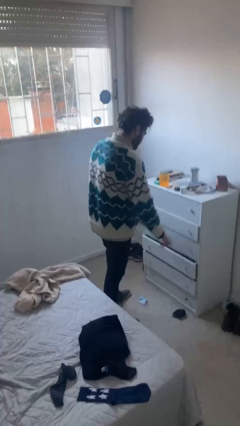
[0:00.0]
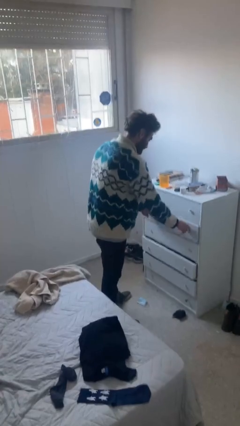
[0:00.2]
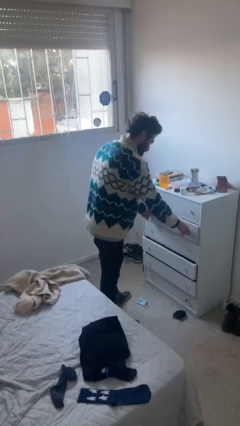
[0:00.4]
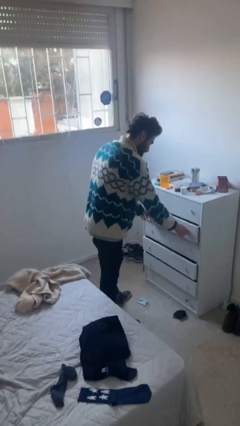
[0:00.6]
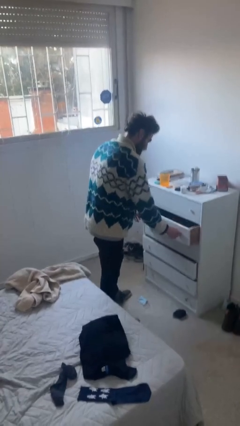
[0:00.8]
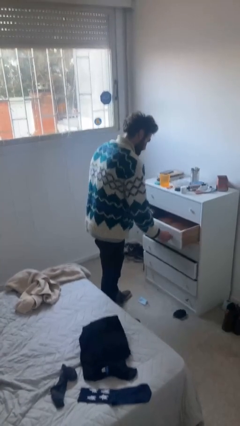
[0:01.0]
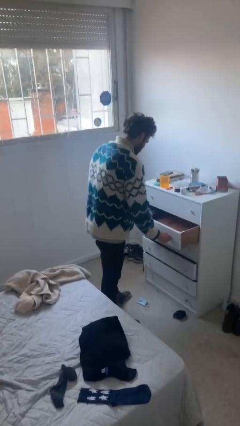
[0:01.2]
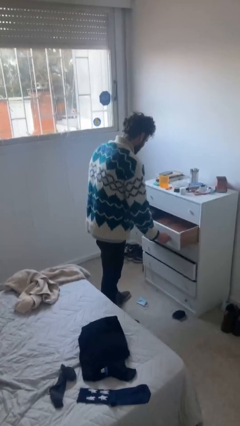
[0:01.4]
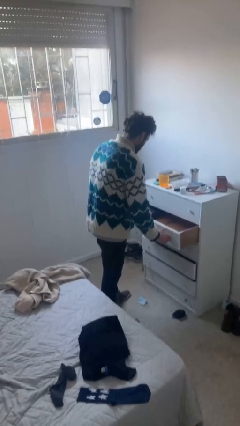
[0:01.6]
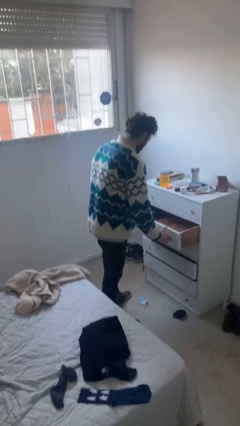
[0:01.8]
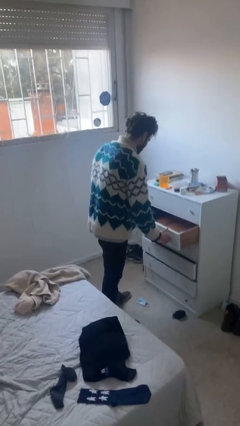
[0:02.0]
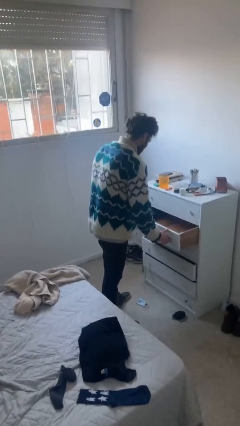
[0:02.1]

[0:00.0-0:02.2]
person opens dresser drawer

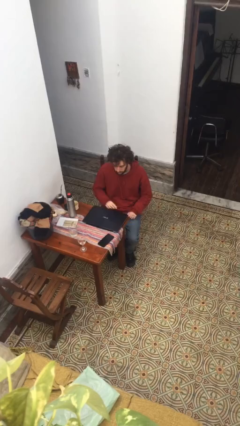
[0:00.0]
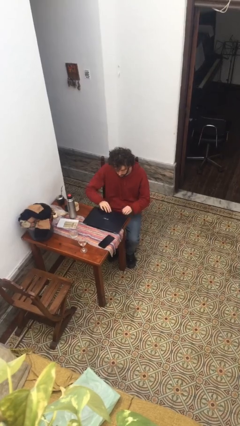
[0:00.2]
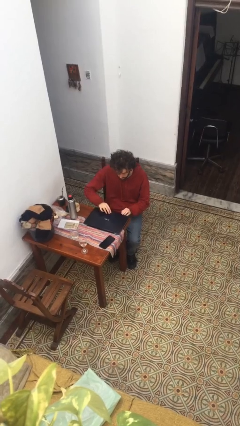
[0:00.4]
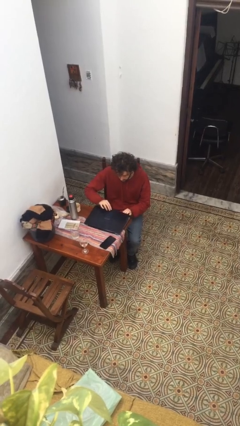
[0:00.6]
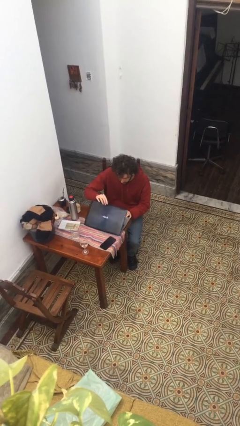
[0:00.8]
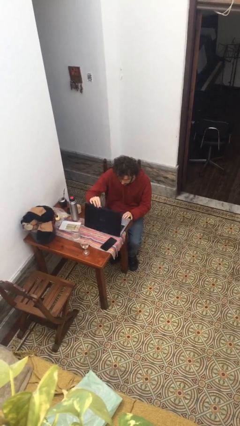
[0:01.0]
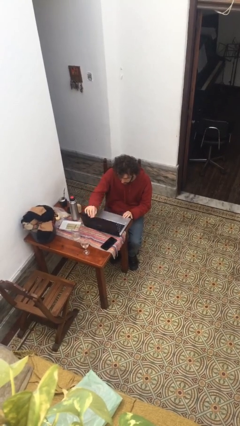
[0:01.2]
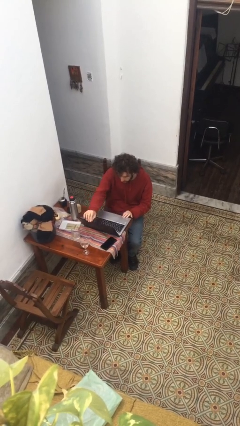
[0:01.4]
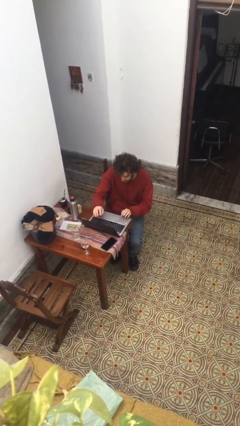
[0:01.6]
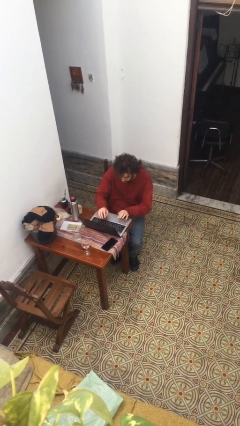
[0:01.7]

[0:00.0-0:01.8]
person opens laptop

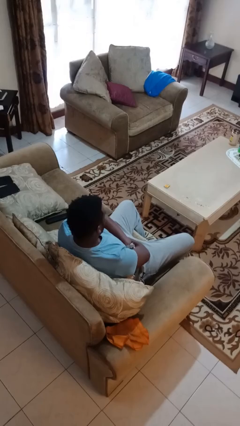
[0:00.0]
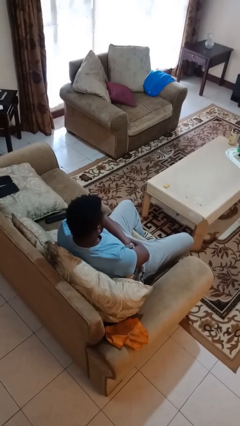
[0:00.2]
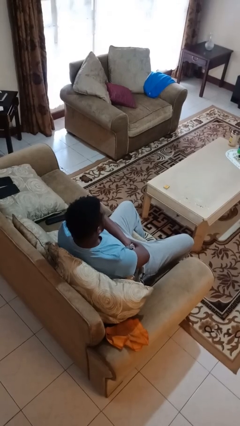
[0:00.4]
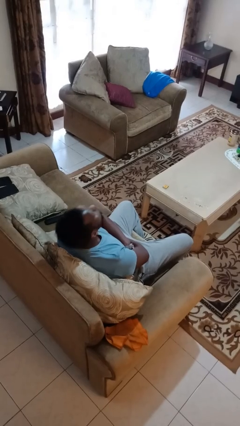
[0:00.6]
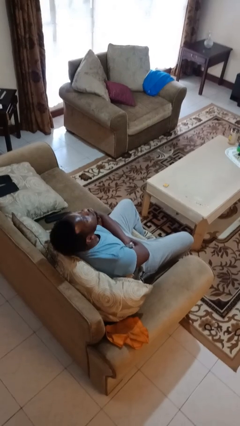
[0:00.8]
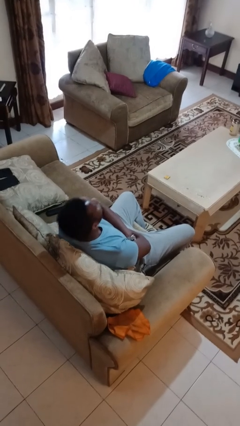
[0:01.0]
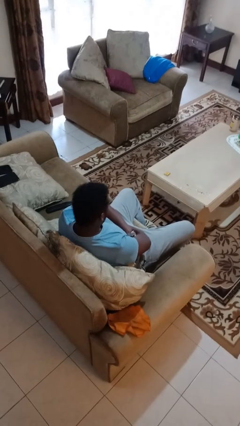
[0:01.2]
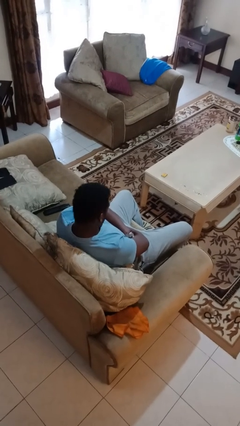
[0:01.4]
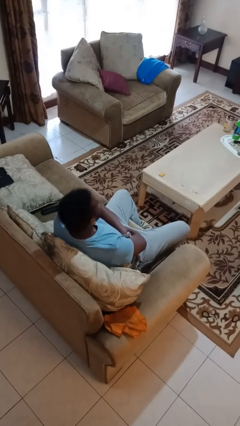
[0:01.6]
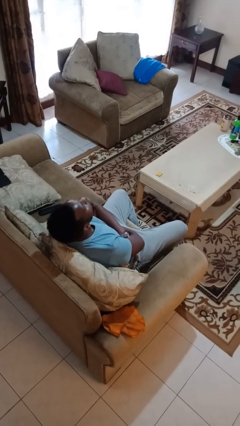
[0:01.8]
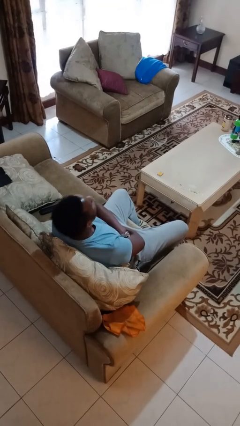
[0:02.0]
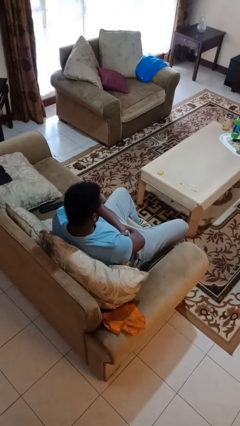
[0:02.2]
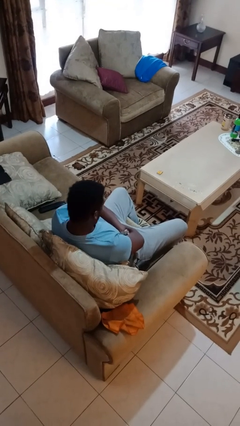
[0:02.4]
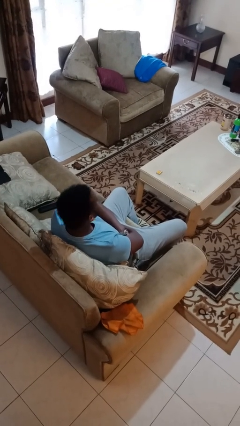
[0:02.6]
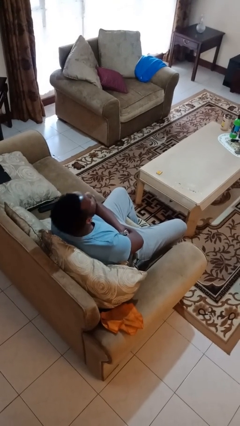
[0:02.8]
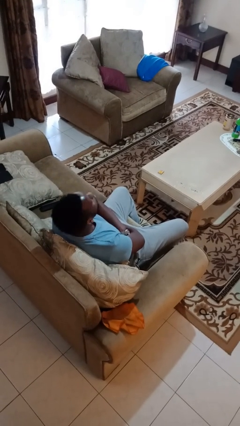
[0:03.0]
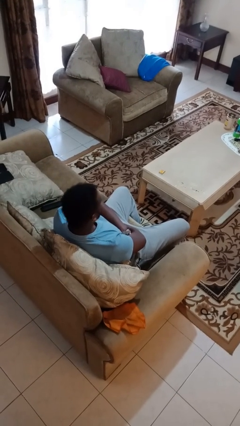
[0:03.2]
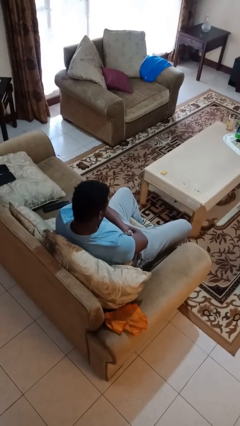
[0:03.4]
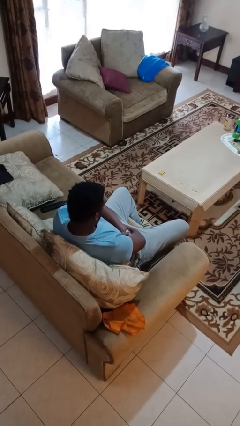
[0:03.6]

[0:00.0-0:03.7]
person nods head

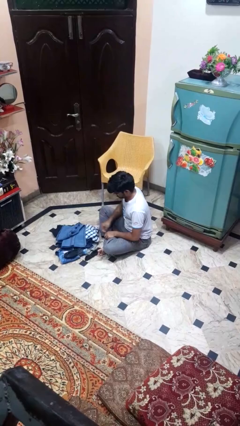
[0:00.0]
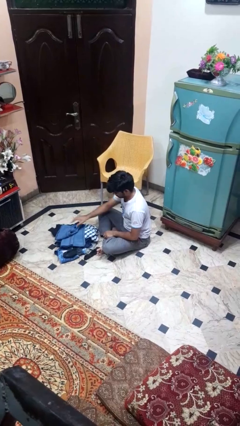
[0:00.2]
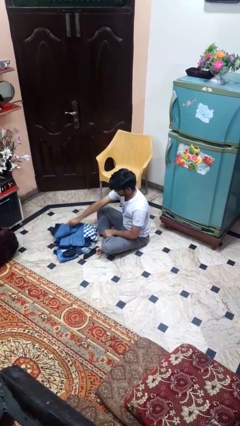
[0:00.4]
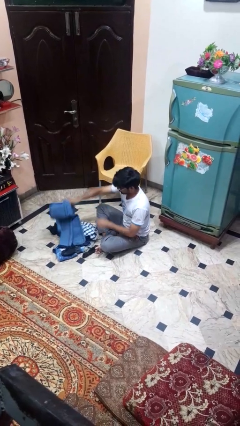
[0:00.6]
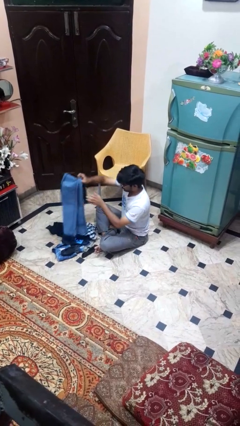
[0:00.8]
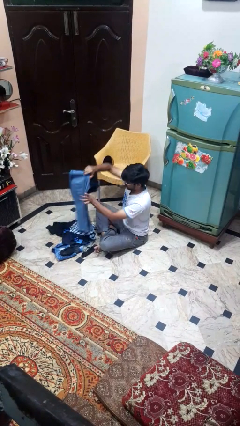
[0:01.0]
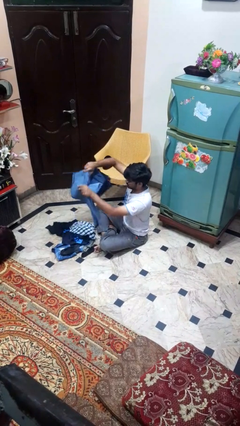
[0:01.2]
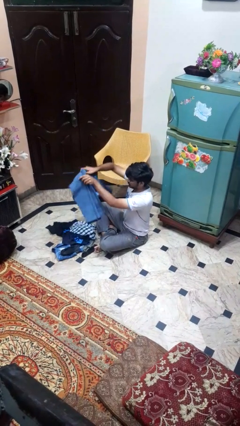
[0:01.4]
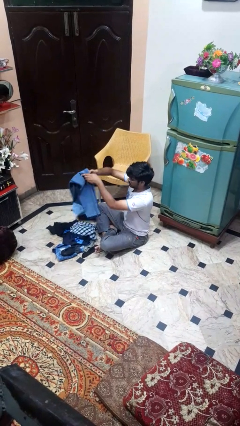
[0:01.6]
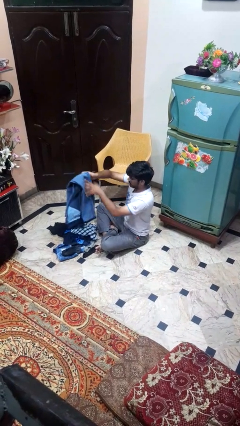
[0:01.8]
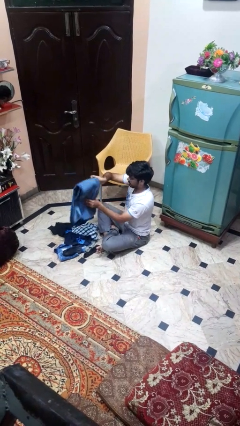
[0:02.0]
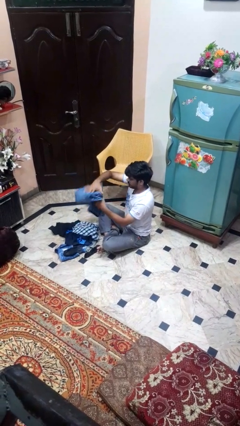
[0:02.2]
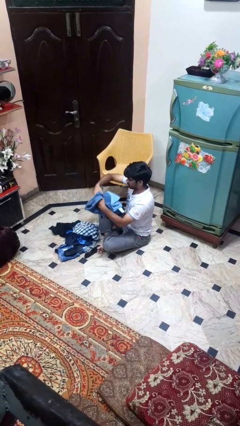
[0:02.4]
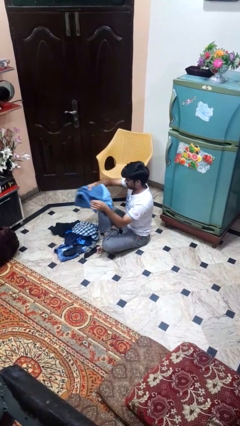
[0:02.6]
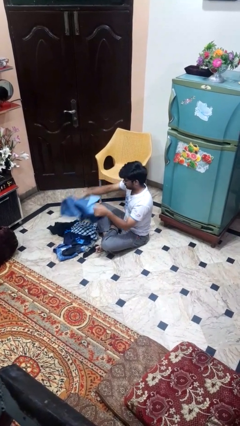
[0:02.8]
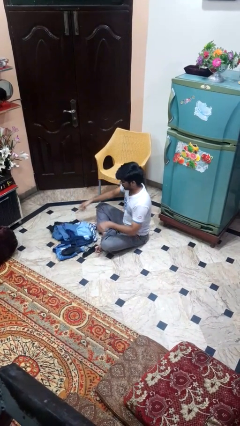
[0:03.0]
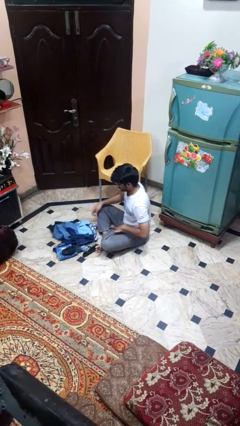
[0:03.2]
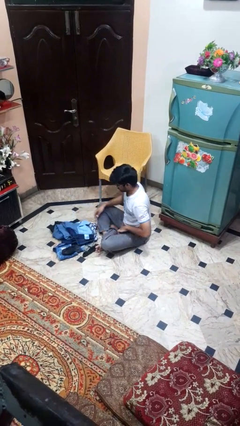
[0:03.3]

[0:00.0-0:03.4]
person folds pants

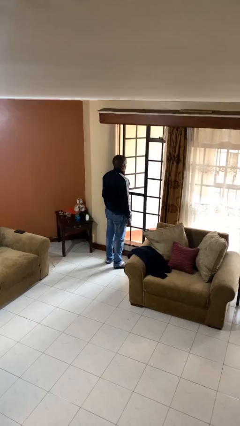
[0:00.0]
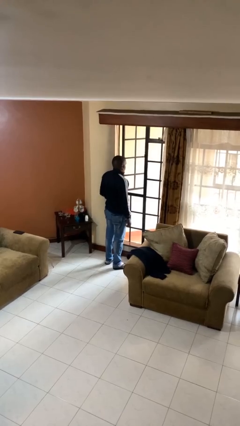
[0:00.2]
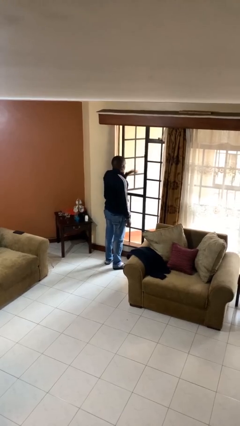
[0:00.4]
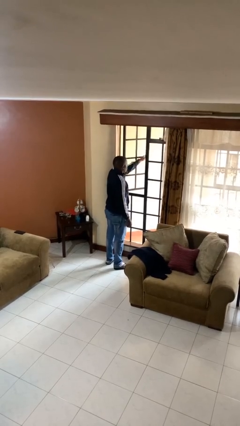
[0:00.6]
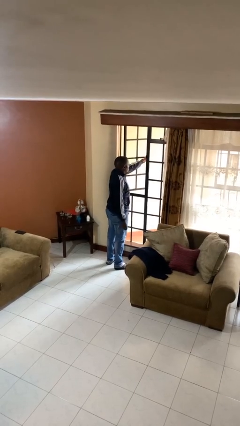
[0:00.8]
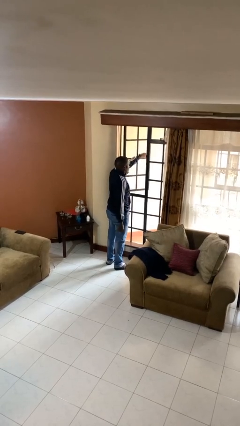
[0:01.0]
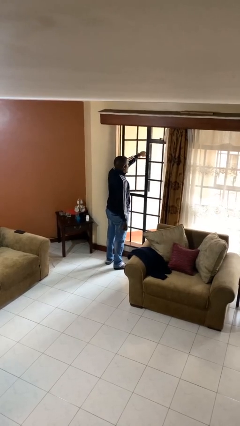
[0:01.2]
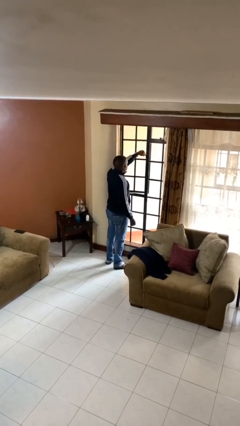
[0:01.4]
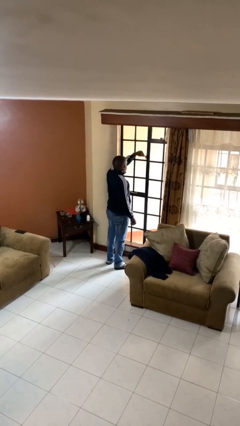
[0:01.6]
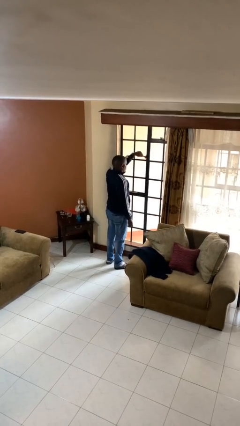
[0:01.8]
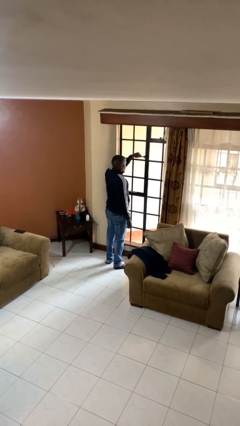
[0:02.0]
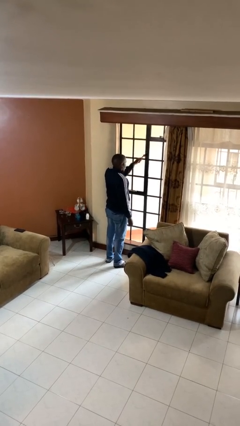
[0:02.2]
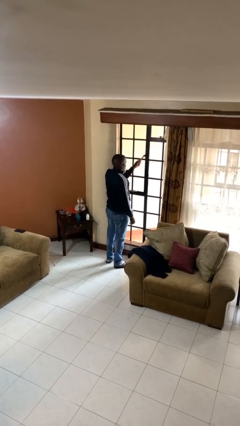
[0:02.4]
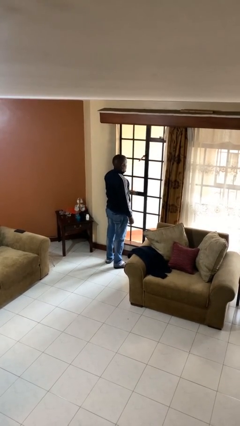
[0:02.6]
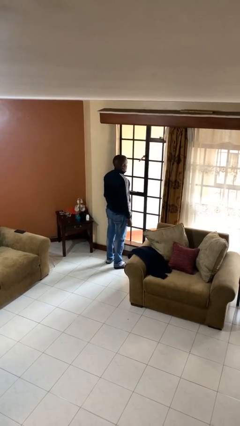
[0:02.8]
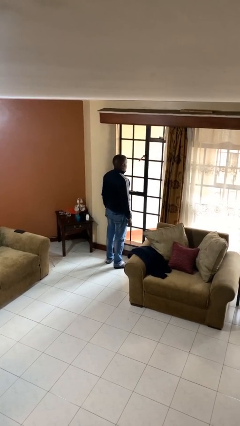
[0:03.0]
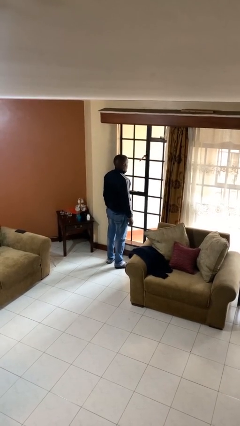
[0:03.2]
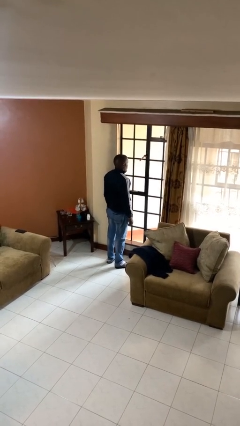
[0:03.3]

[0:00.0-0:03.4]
person closes home window

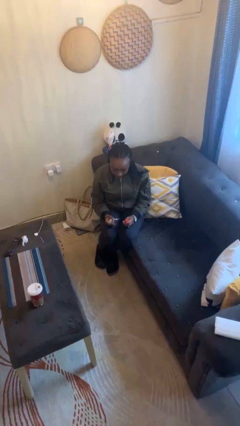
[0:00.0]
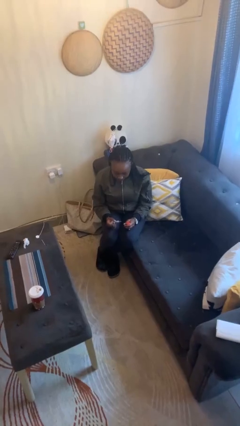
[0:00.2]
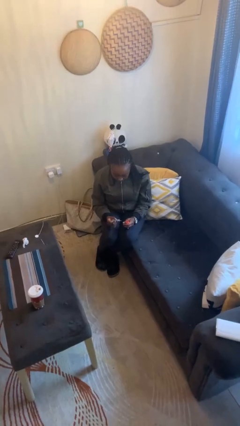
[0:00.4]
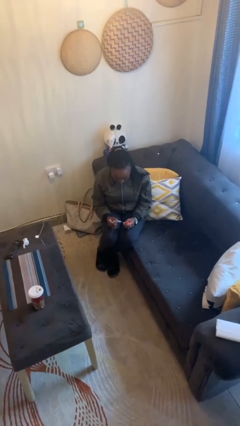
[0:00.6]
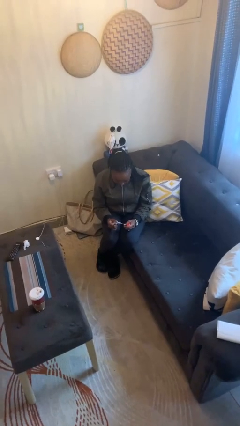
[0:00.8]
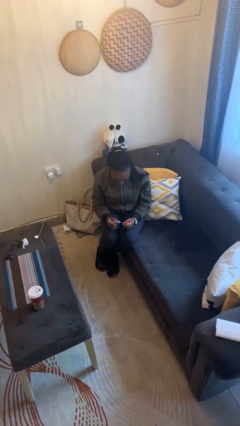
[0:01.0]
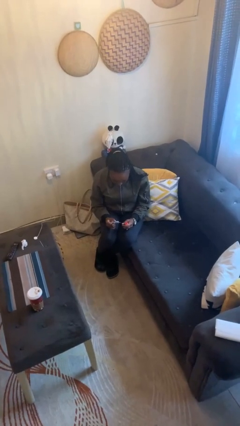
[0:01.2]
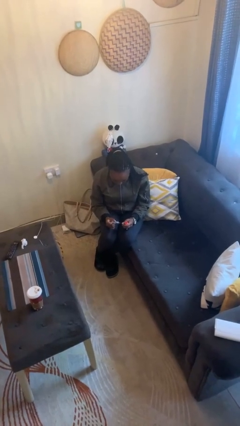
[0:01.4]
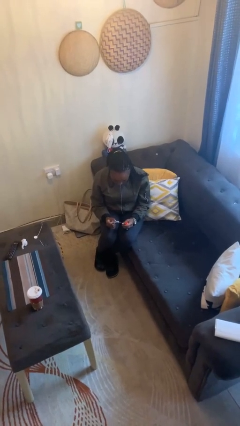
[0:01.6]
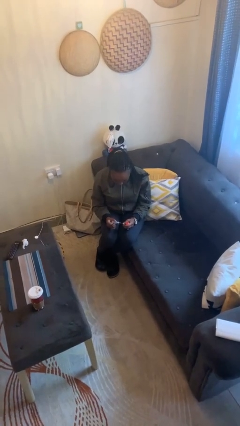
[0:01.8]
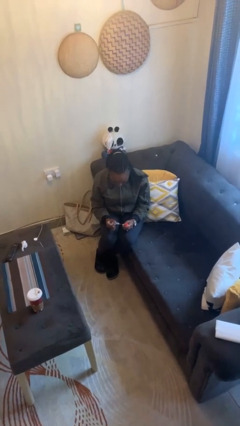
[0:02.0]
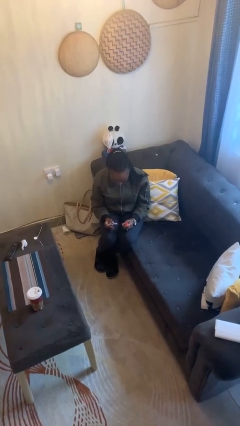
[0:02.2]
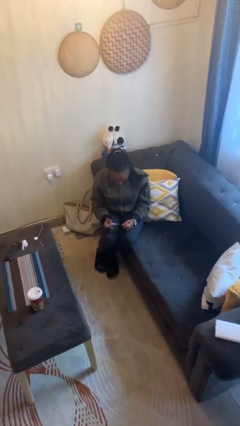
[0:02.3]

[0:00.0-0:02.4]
person paints fingernails

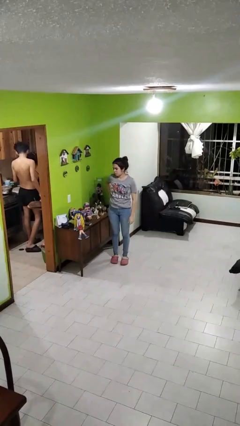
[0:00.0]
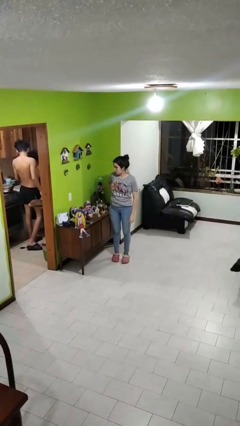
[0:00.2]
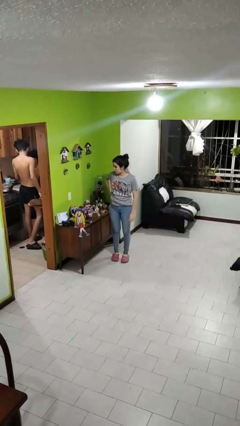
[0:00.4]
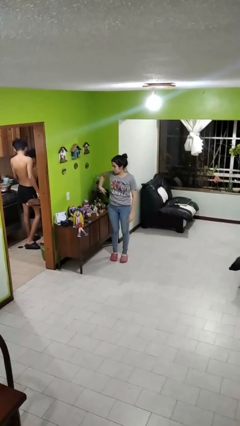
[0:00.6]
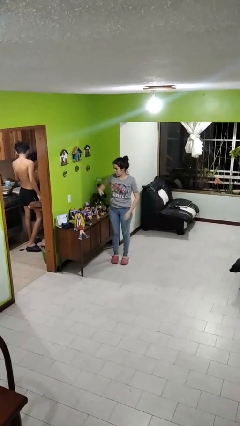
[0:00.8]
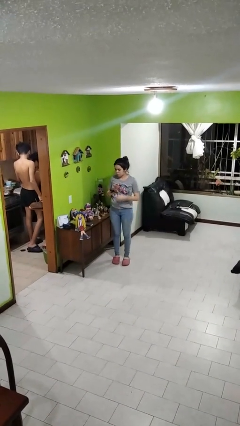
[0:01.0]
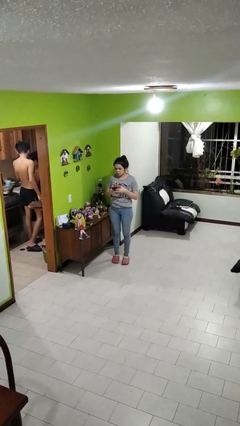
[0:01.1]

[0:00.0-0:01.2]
person takes phone from pocket
